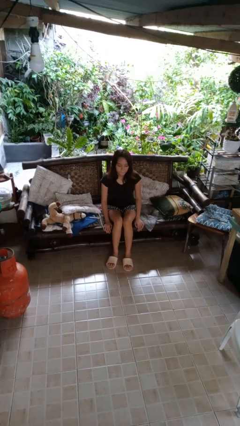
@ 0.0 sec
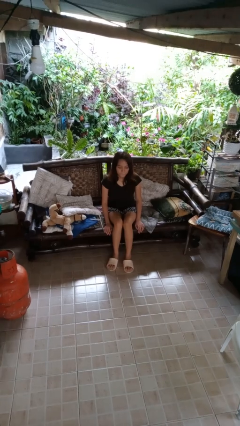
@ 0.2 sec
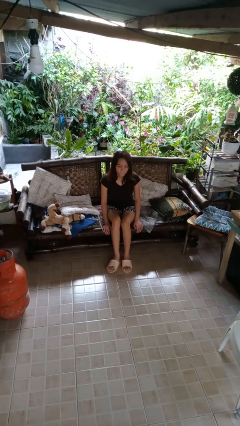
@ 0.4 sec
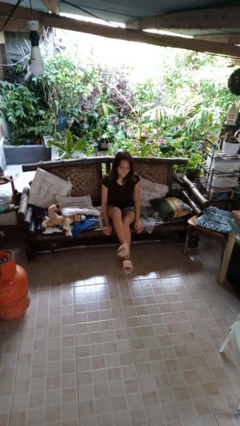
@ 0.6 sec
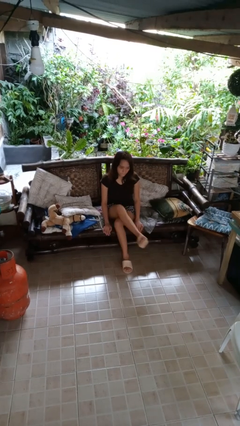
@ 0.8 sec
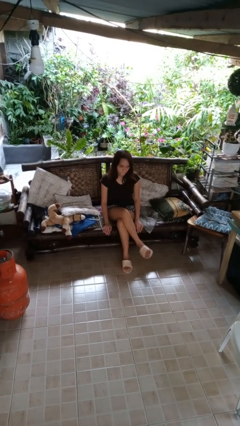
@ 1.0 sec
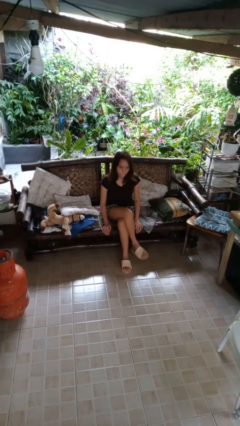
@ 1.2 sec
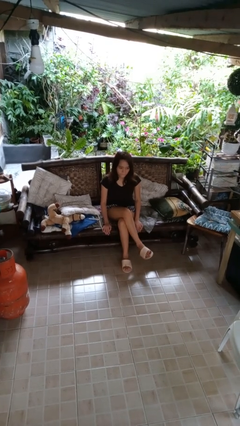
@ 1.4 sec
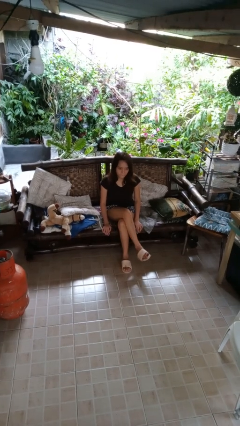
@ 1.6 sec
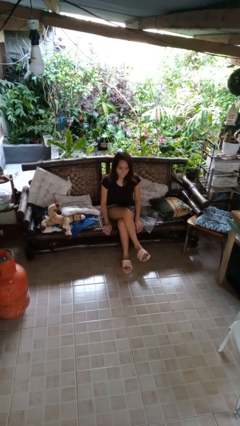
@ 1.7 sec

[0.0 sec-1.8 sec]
person crosses legs

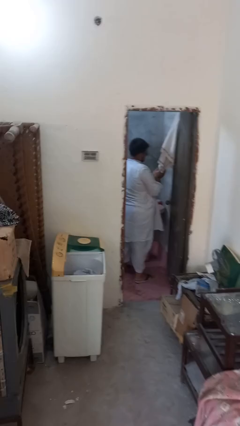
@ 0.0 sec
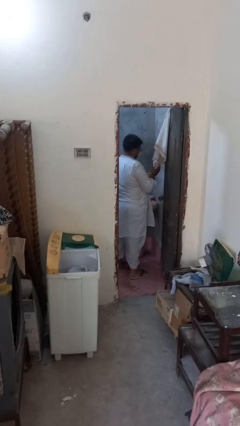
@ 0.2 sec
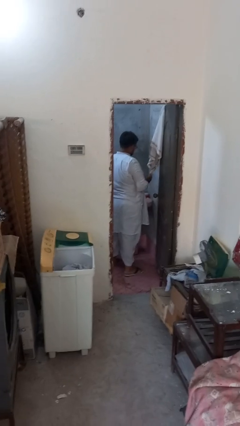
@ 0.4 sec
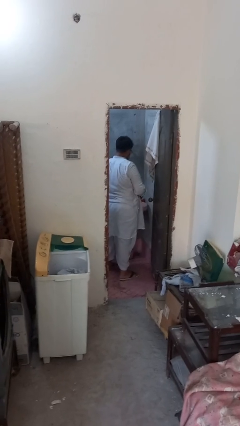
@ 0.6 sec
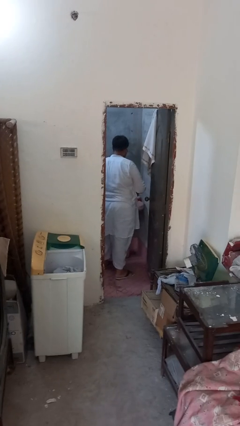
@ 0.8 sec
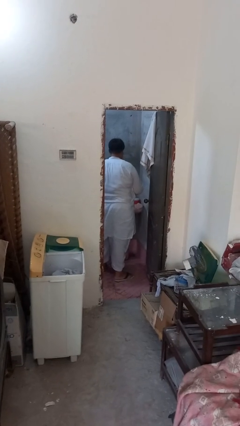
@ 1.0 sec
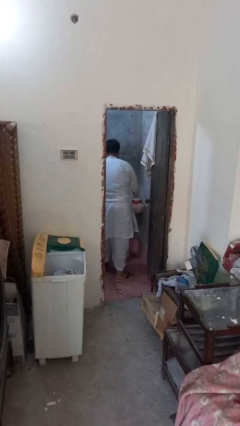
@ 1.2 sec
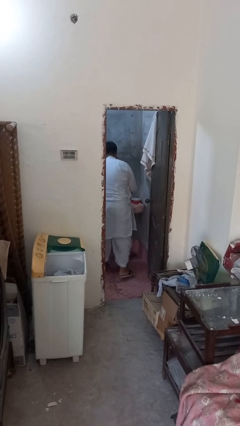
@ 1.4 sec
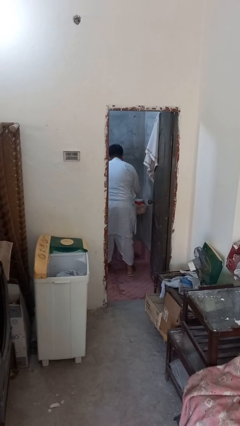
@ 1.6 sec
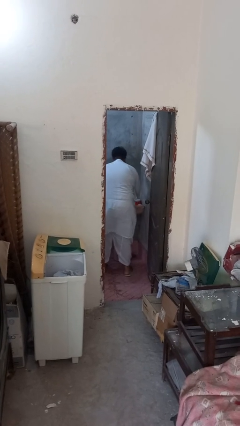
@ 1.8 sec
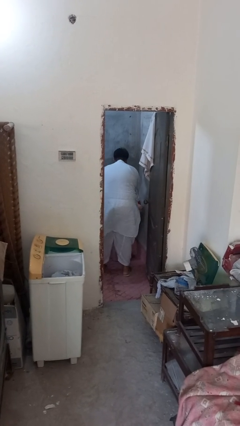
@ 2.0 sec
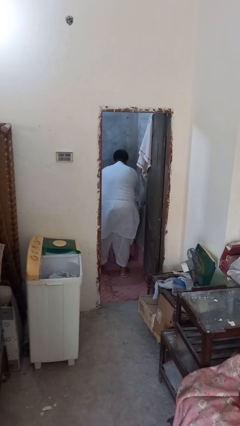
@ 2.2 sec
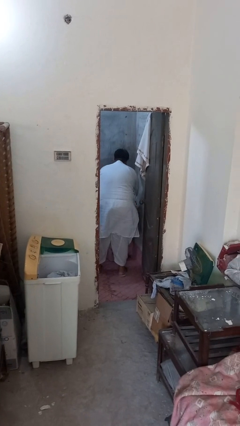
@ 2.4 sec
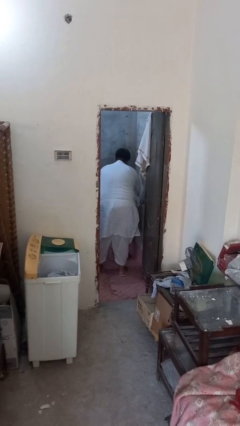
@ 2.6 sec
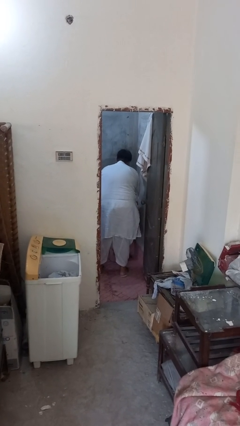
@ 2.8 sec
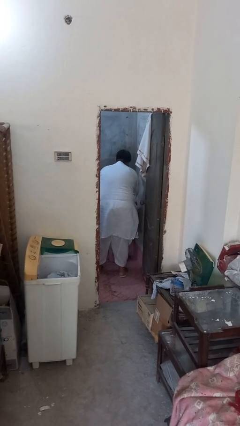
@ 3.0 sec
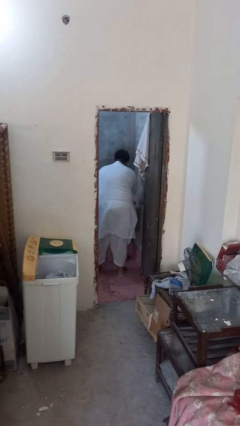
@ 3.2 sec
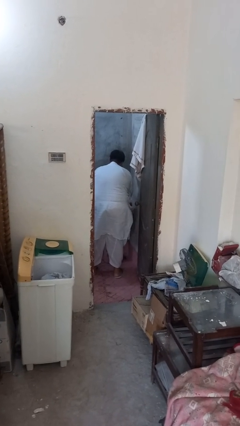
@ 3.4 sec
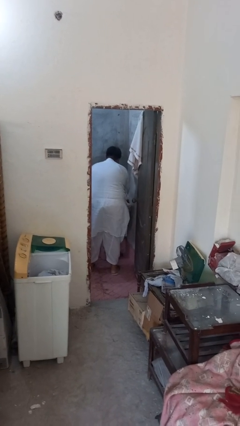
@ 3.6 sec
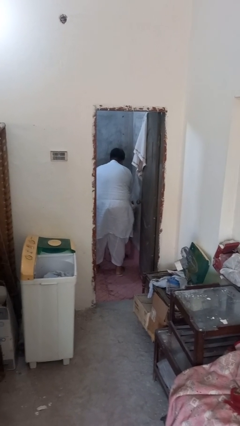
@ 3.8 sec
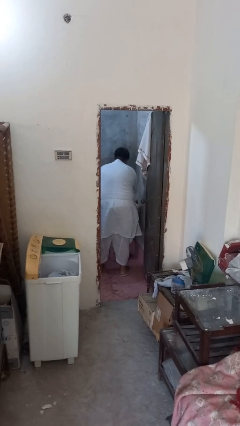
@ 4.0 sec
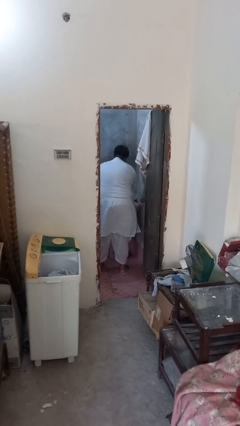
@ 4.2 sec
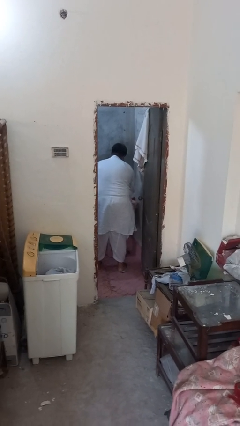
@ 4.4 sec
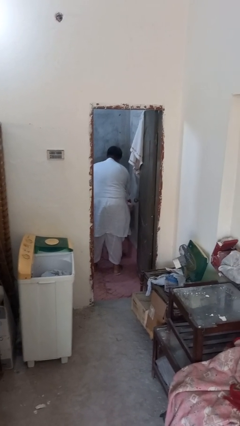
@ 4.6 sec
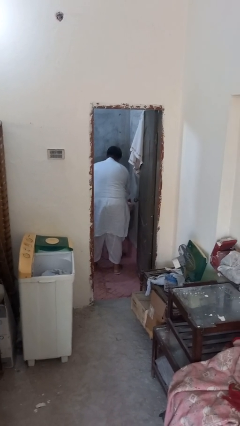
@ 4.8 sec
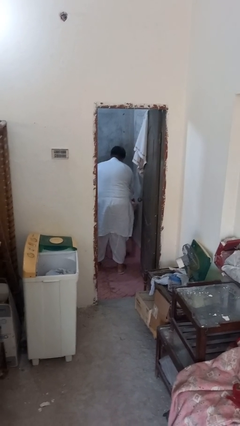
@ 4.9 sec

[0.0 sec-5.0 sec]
person washes hands

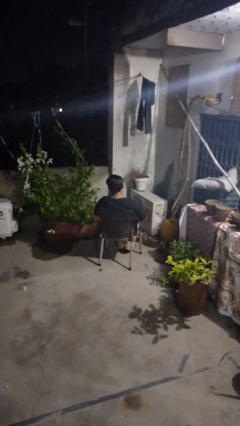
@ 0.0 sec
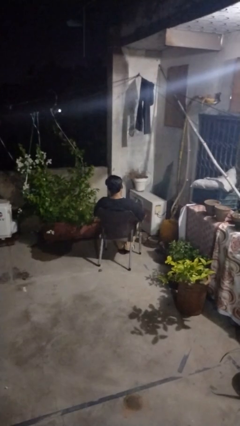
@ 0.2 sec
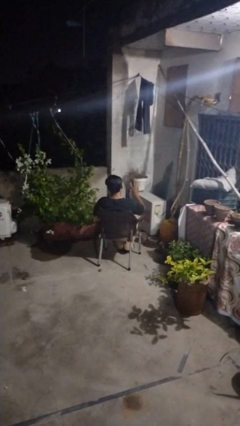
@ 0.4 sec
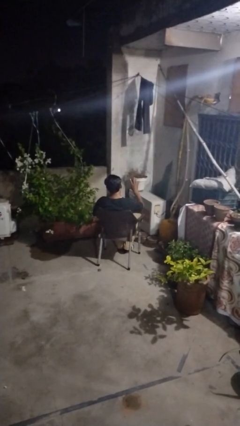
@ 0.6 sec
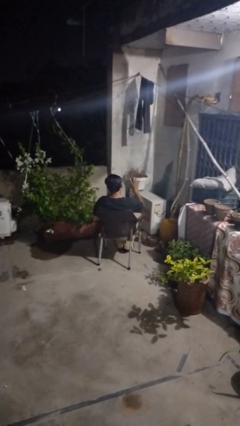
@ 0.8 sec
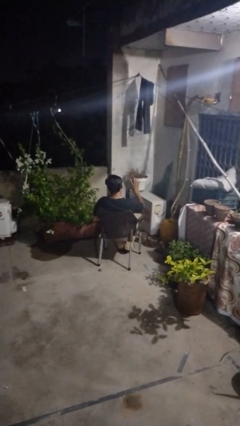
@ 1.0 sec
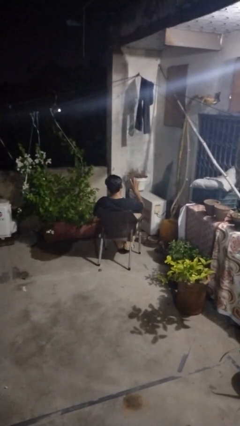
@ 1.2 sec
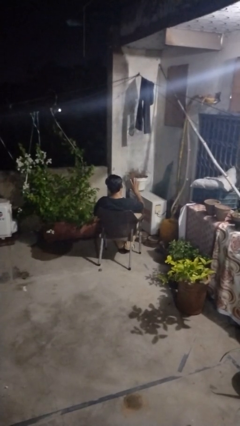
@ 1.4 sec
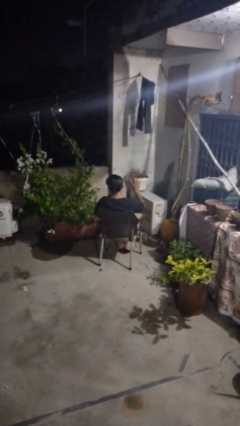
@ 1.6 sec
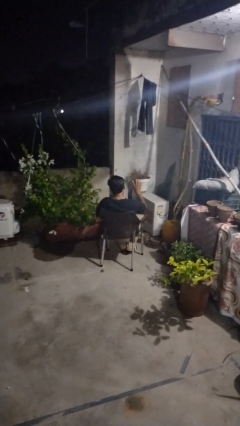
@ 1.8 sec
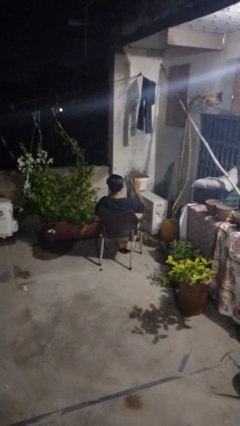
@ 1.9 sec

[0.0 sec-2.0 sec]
person gestures number four

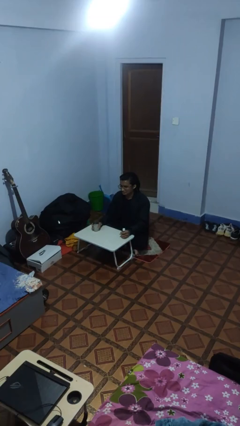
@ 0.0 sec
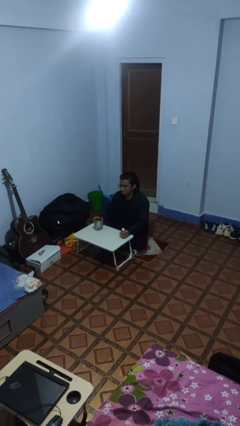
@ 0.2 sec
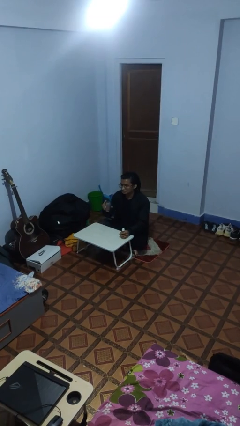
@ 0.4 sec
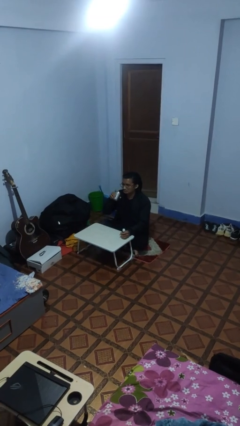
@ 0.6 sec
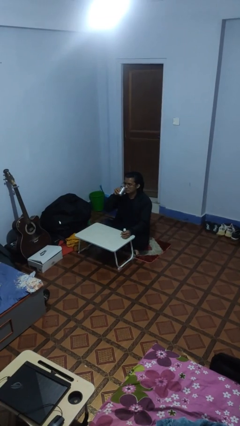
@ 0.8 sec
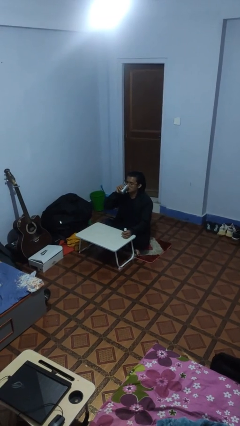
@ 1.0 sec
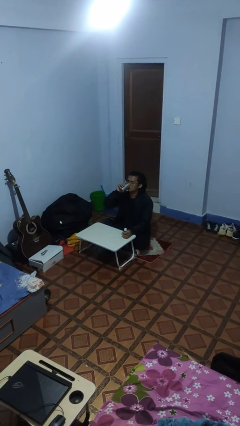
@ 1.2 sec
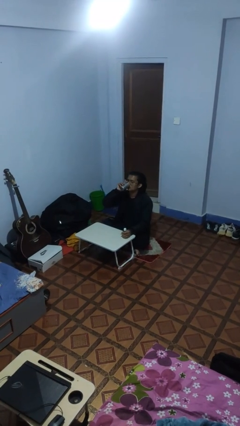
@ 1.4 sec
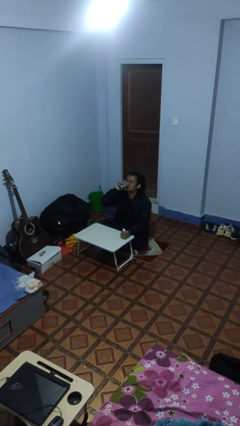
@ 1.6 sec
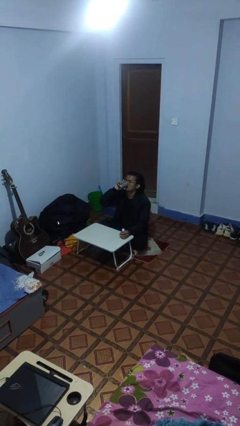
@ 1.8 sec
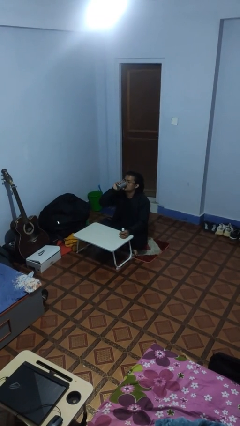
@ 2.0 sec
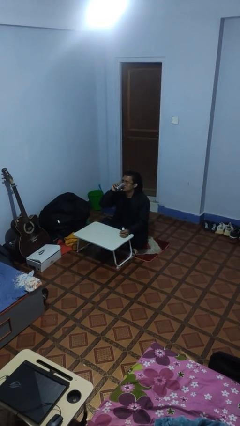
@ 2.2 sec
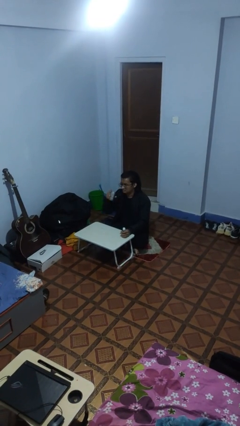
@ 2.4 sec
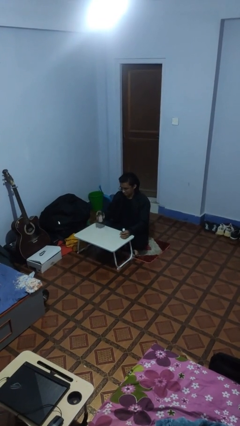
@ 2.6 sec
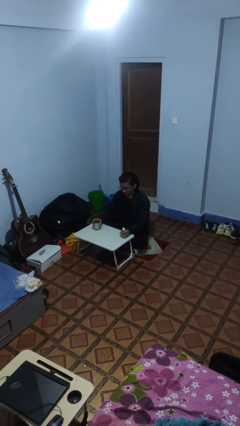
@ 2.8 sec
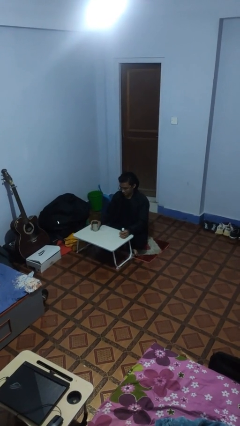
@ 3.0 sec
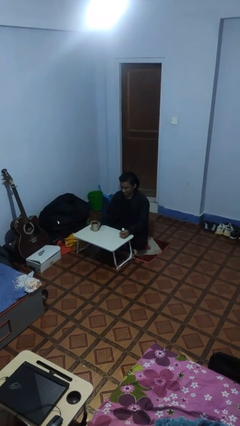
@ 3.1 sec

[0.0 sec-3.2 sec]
person drinks from cup

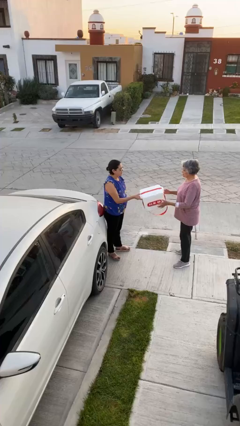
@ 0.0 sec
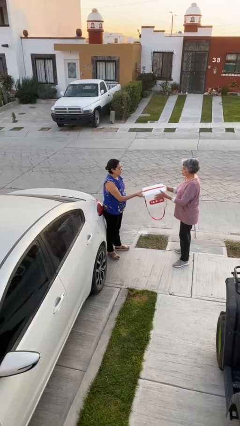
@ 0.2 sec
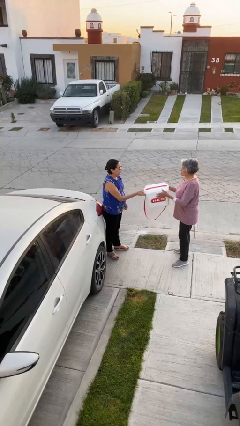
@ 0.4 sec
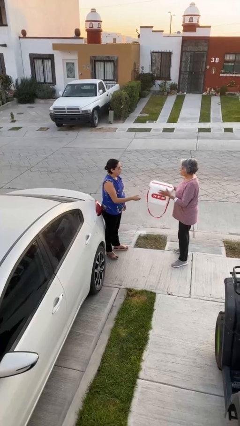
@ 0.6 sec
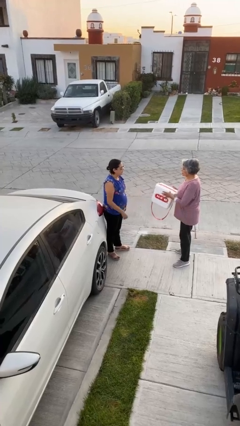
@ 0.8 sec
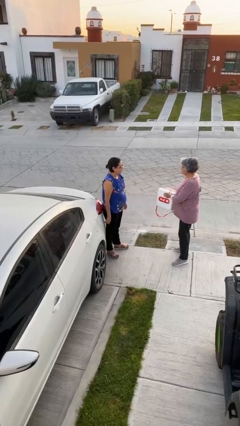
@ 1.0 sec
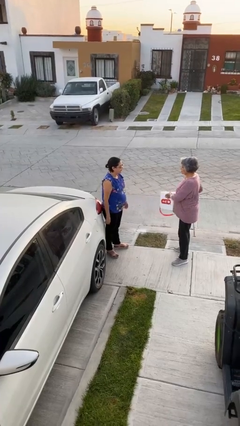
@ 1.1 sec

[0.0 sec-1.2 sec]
person transfers object to person

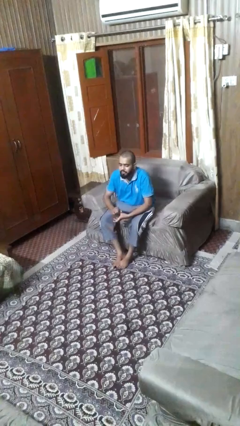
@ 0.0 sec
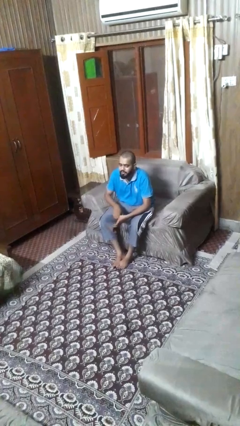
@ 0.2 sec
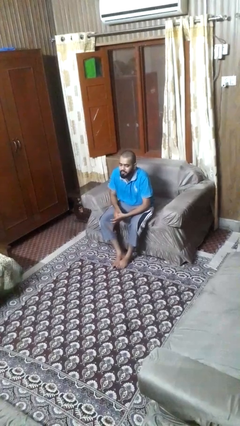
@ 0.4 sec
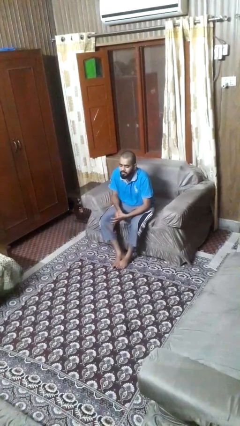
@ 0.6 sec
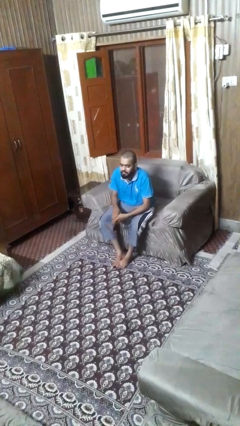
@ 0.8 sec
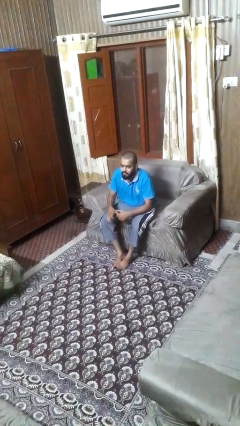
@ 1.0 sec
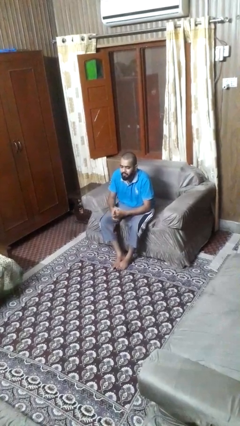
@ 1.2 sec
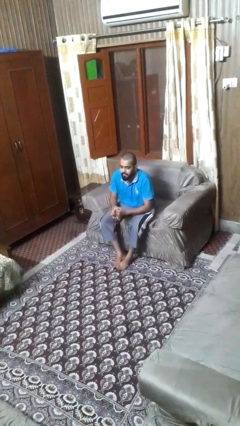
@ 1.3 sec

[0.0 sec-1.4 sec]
person cracks knuckles

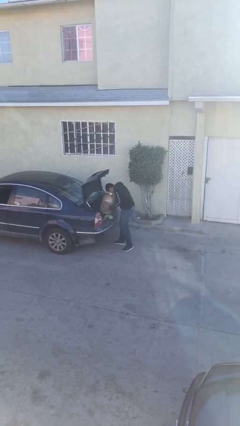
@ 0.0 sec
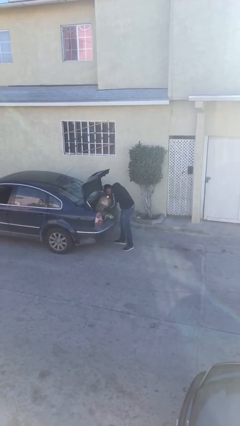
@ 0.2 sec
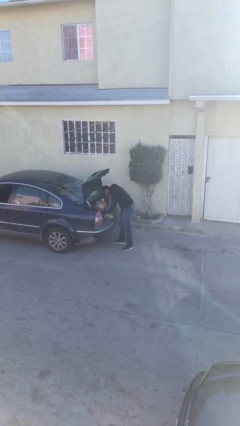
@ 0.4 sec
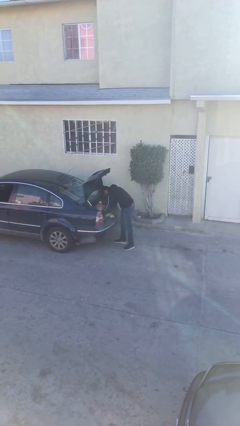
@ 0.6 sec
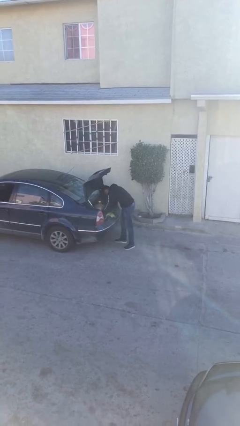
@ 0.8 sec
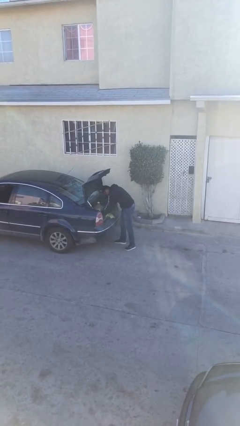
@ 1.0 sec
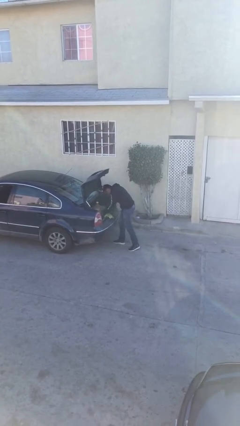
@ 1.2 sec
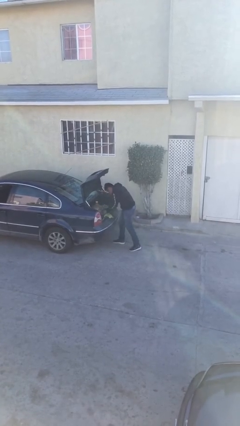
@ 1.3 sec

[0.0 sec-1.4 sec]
person loads car

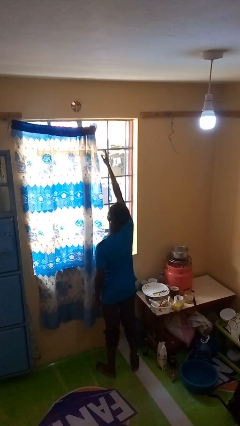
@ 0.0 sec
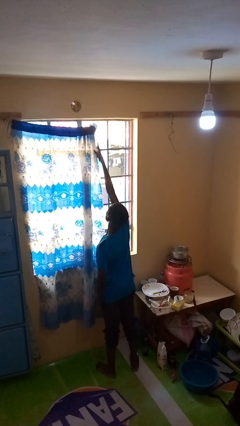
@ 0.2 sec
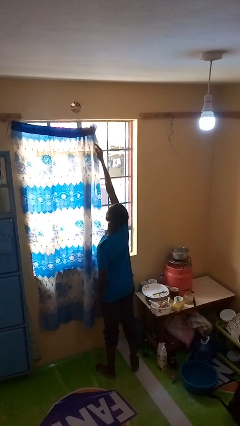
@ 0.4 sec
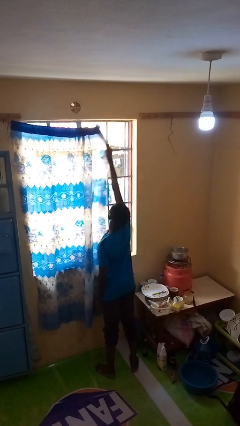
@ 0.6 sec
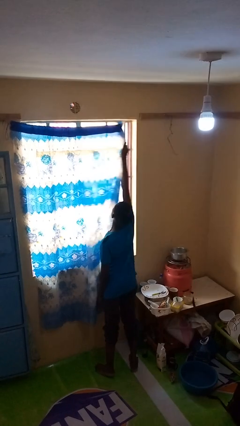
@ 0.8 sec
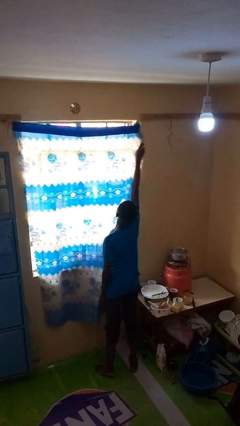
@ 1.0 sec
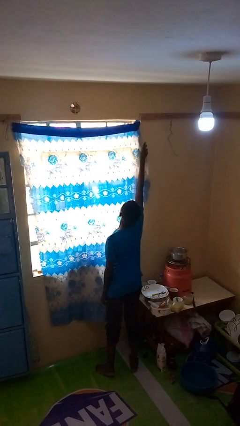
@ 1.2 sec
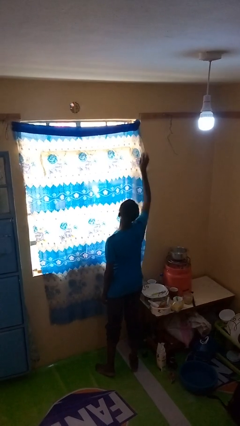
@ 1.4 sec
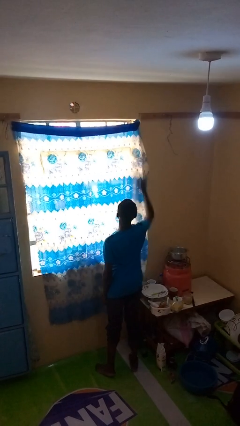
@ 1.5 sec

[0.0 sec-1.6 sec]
person closes curtains
